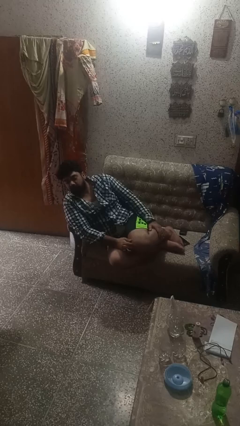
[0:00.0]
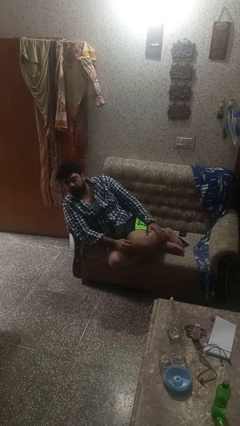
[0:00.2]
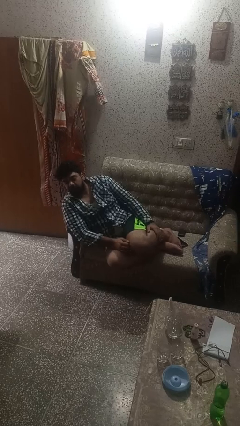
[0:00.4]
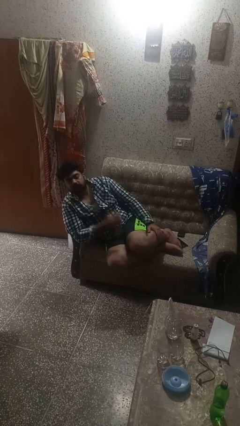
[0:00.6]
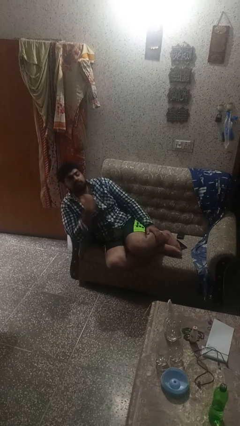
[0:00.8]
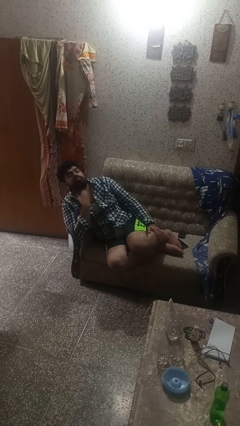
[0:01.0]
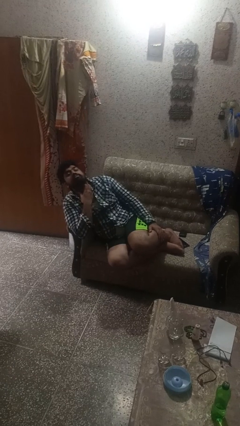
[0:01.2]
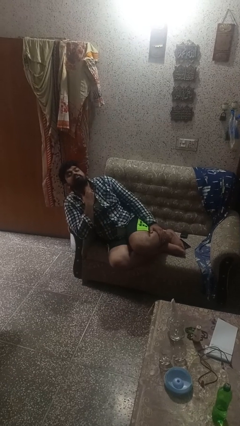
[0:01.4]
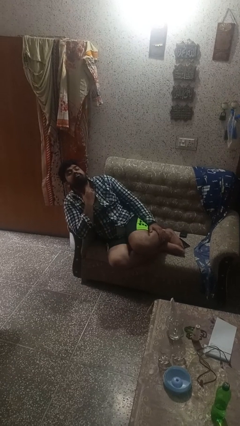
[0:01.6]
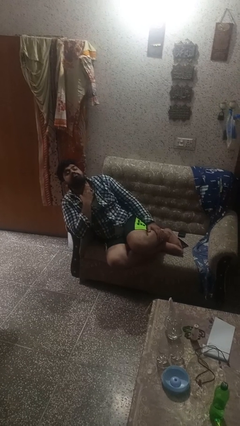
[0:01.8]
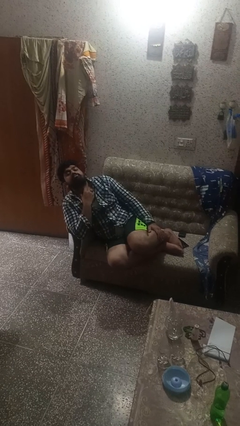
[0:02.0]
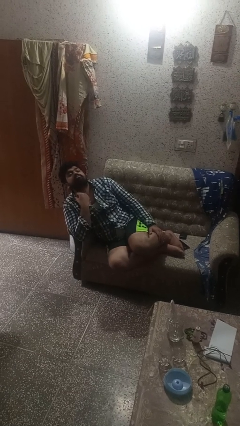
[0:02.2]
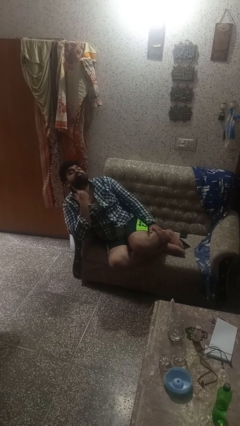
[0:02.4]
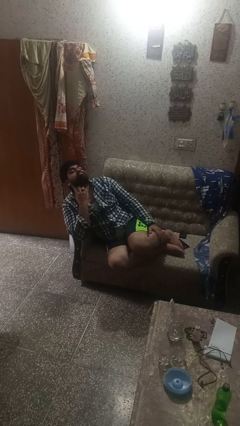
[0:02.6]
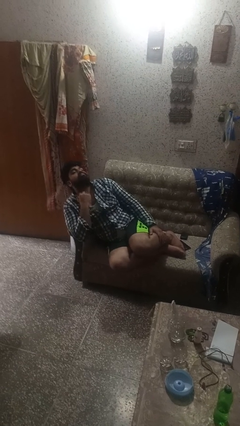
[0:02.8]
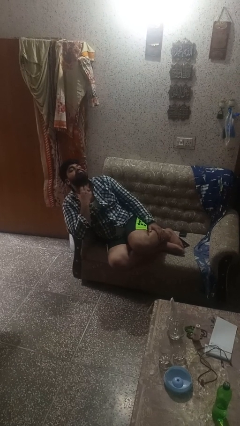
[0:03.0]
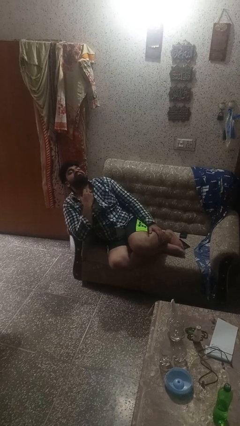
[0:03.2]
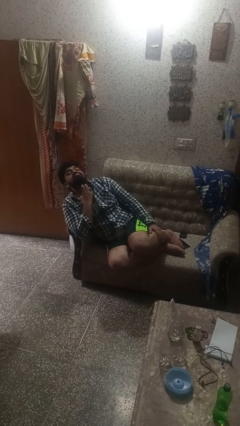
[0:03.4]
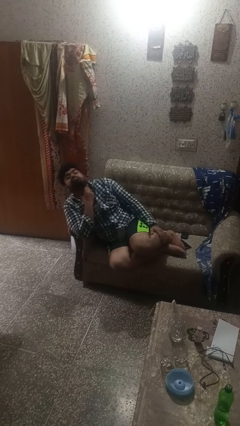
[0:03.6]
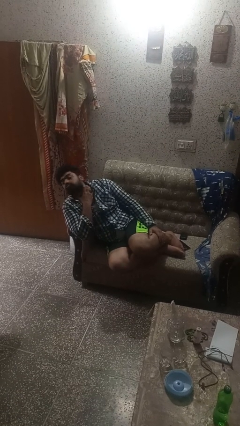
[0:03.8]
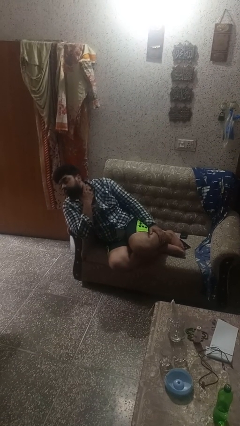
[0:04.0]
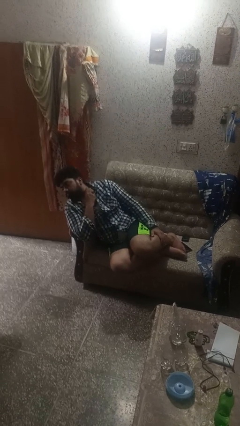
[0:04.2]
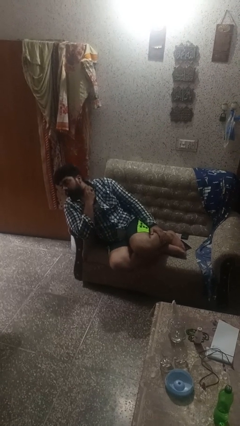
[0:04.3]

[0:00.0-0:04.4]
person rubs neck

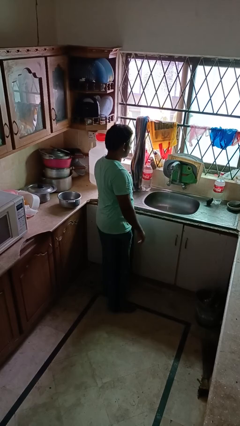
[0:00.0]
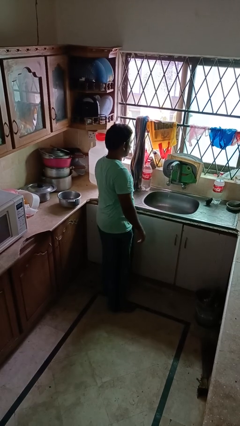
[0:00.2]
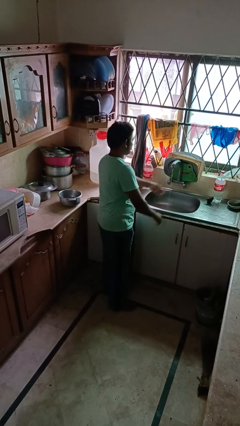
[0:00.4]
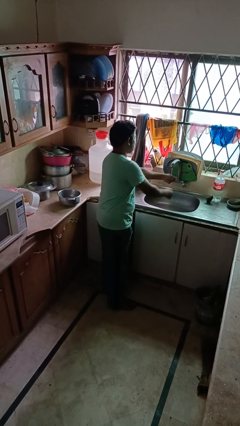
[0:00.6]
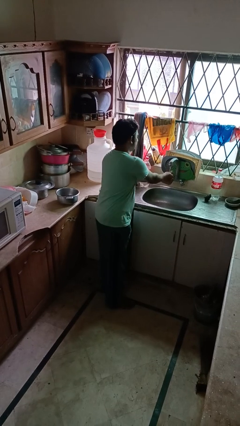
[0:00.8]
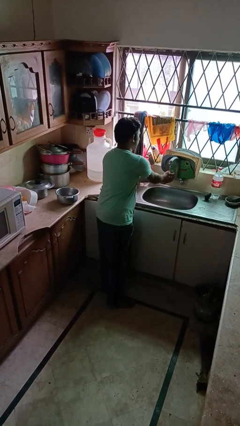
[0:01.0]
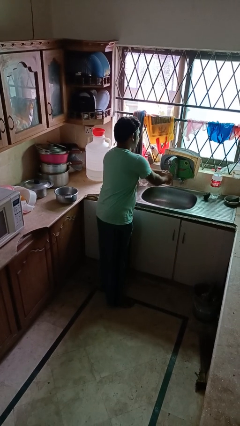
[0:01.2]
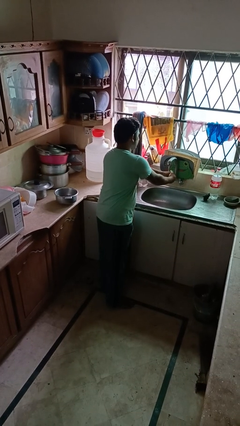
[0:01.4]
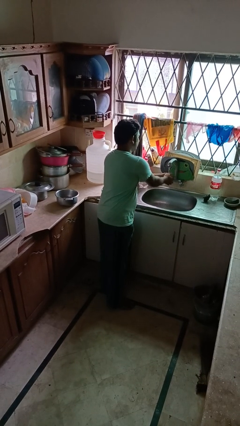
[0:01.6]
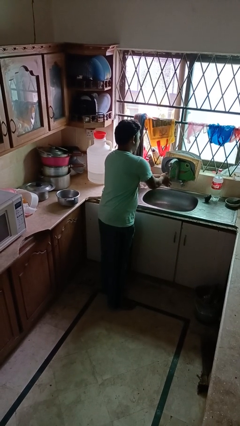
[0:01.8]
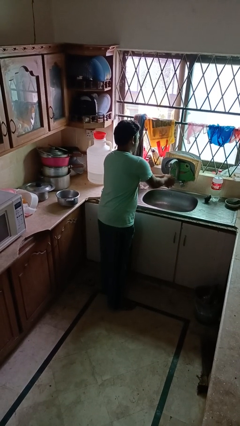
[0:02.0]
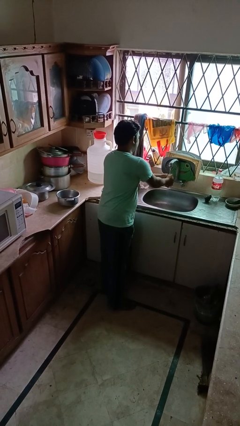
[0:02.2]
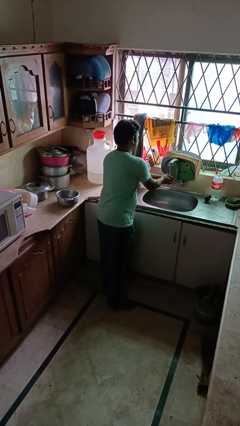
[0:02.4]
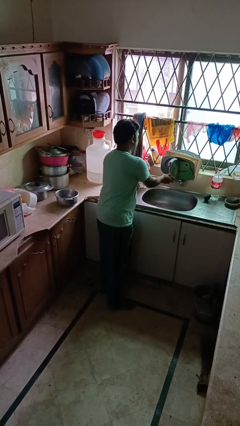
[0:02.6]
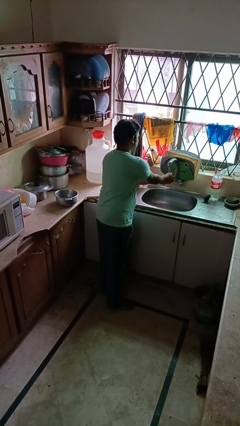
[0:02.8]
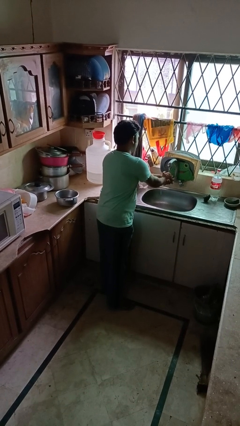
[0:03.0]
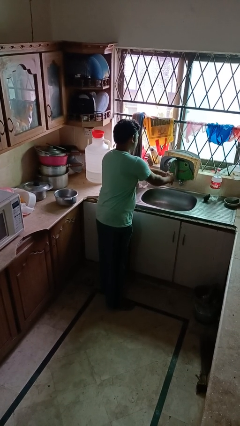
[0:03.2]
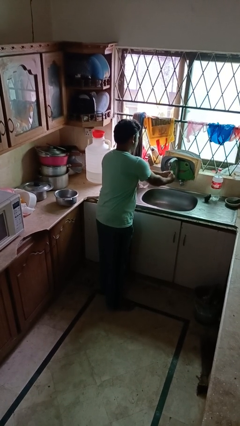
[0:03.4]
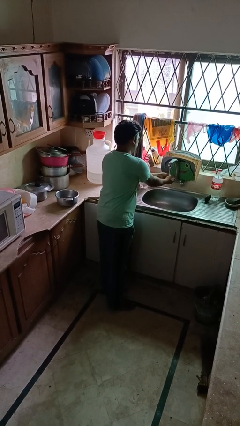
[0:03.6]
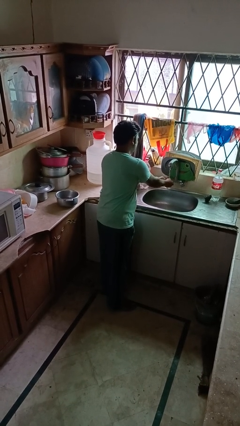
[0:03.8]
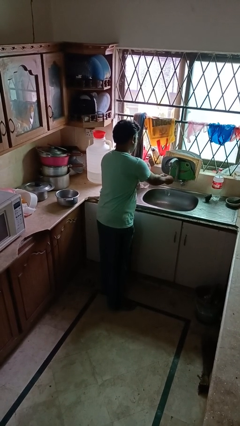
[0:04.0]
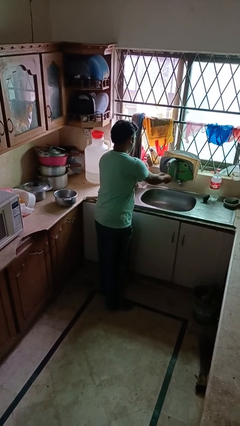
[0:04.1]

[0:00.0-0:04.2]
person washes hands

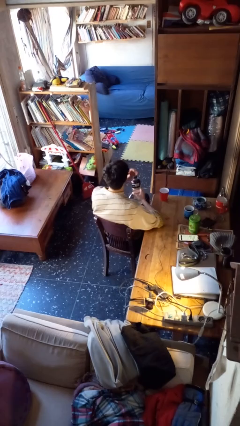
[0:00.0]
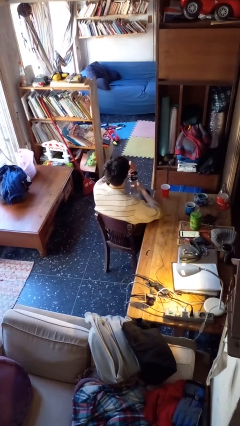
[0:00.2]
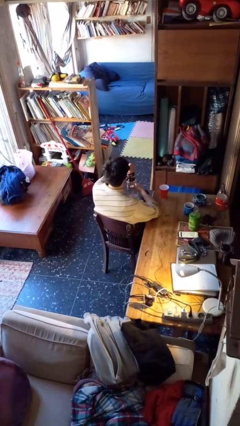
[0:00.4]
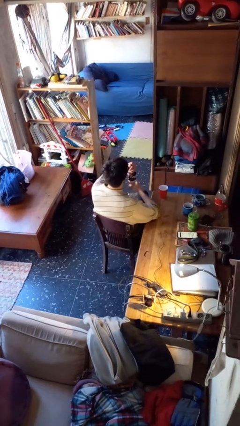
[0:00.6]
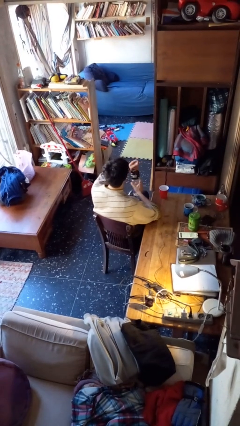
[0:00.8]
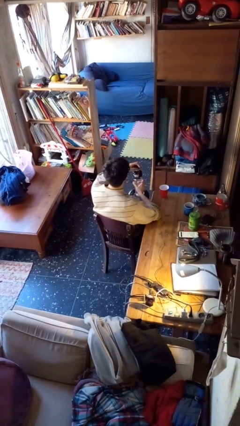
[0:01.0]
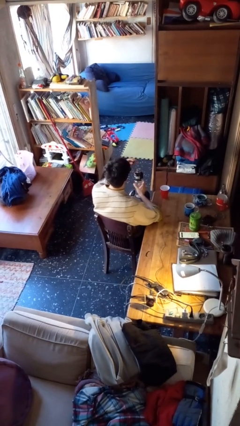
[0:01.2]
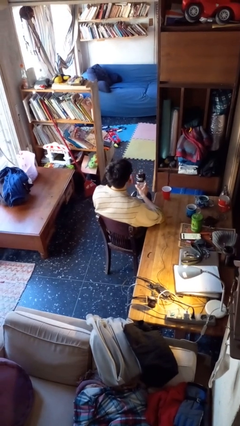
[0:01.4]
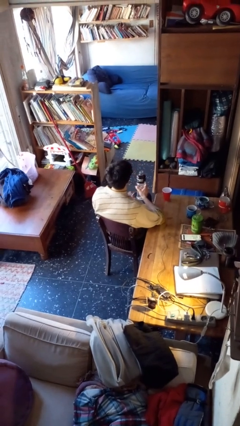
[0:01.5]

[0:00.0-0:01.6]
person unscrews lid from bottle

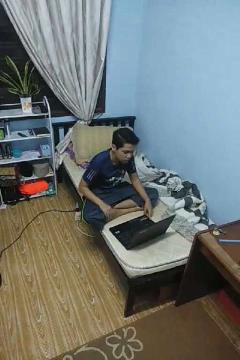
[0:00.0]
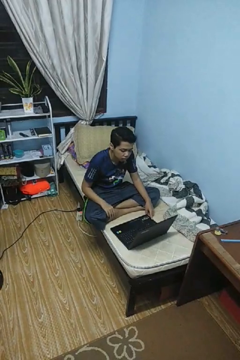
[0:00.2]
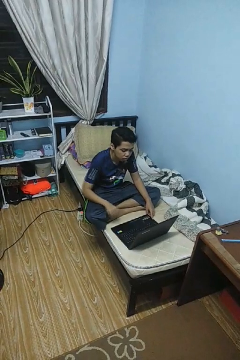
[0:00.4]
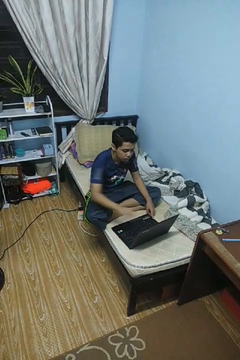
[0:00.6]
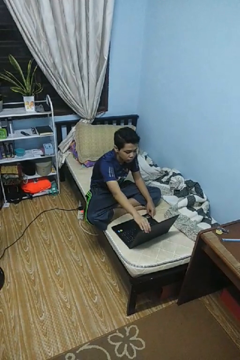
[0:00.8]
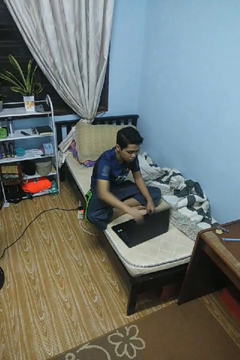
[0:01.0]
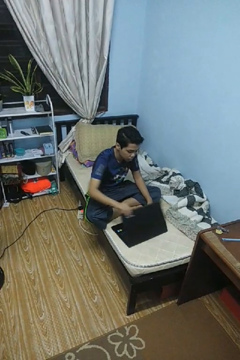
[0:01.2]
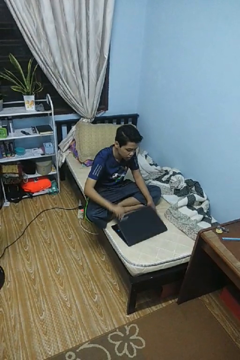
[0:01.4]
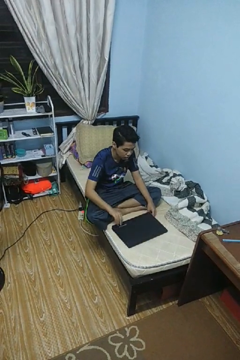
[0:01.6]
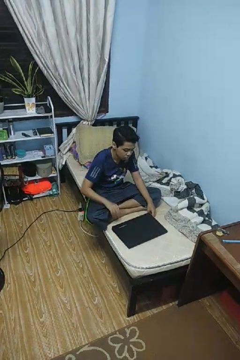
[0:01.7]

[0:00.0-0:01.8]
person closes laptop

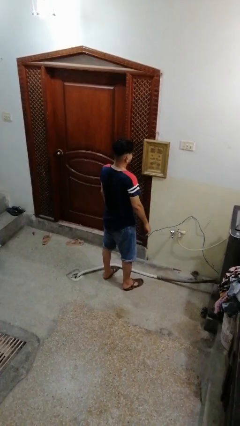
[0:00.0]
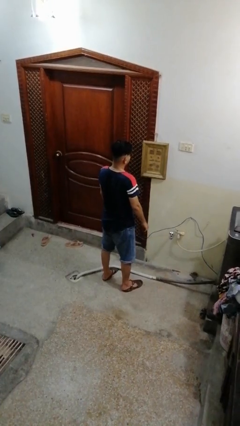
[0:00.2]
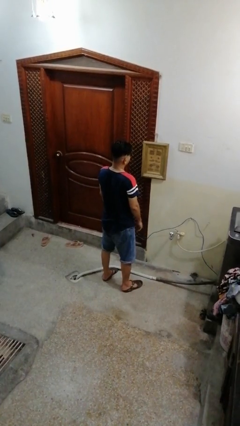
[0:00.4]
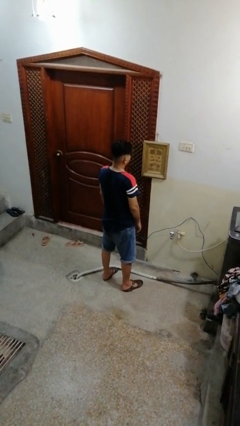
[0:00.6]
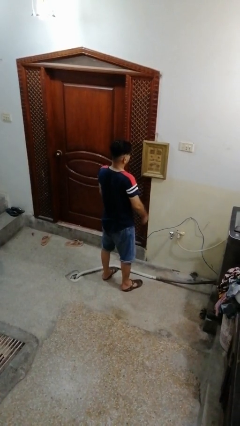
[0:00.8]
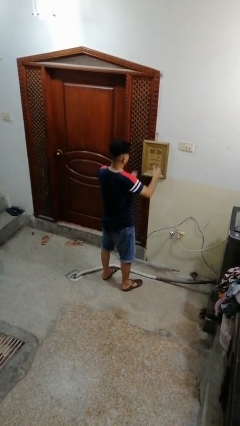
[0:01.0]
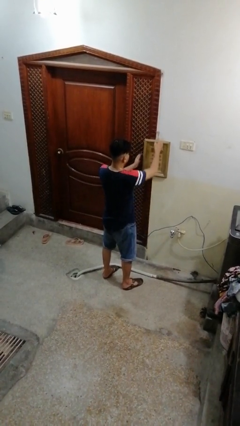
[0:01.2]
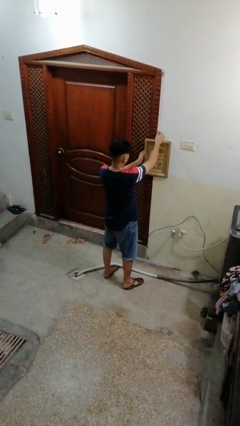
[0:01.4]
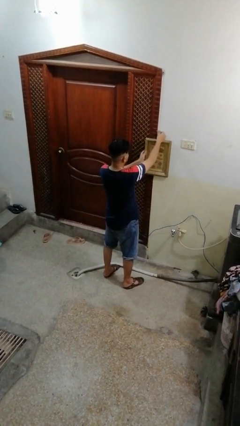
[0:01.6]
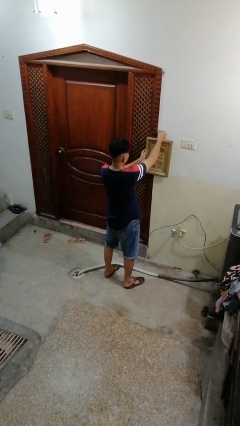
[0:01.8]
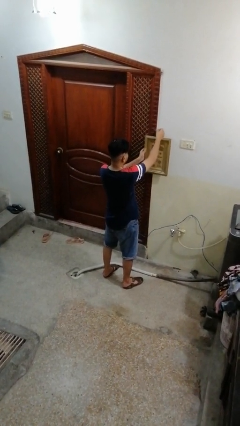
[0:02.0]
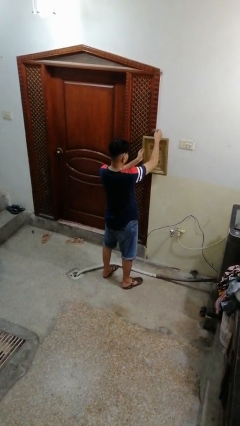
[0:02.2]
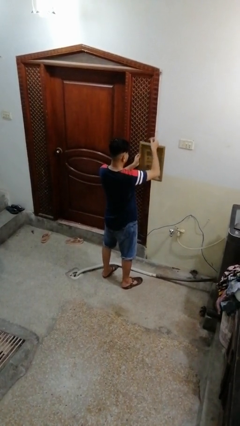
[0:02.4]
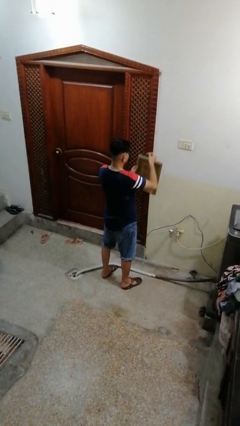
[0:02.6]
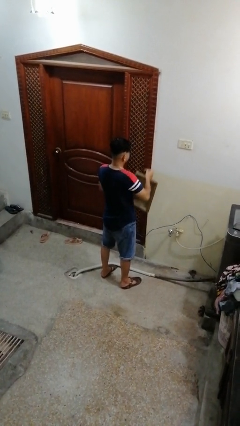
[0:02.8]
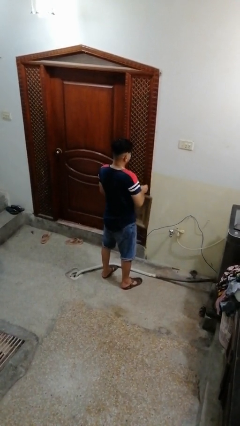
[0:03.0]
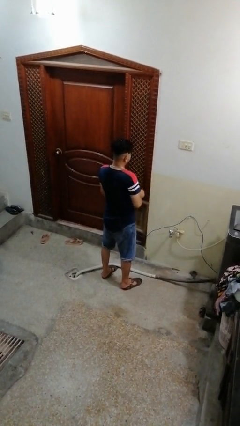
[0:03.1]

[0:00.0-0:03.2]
person takes down picture frame

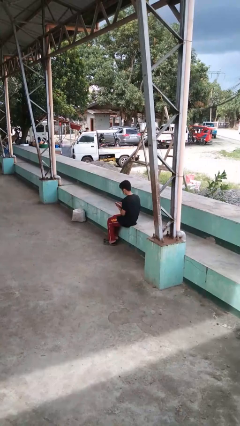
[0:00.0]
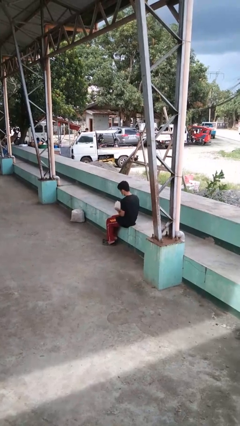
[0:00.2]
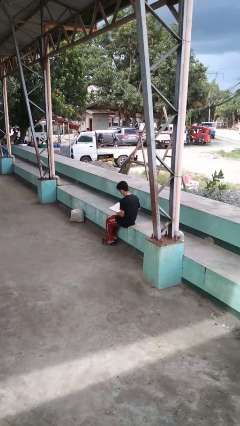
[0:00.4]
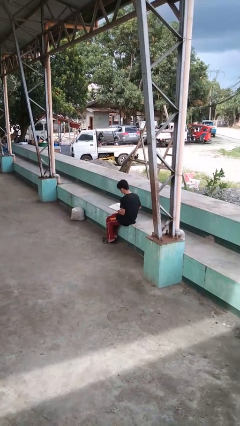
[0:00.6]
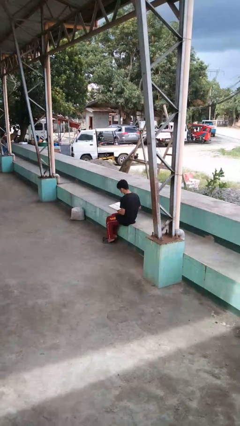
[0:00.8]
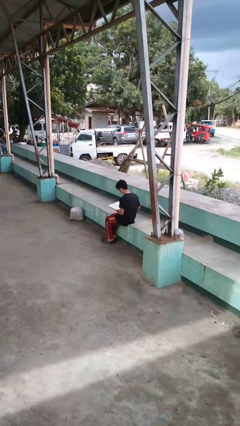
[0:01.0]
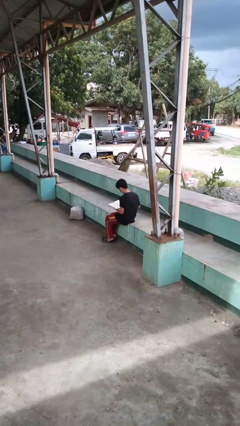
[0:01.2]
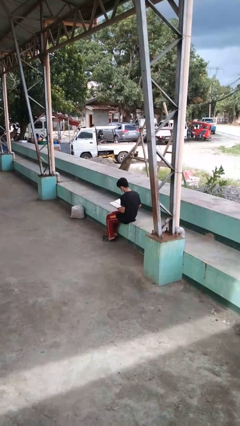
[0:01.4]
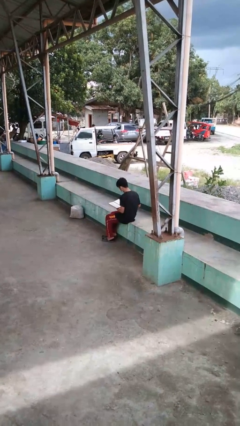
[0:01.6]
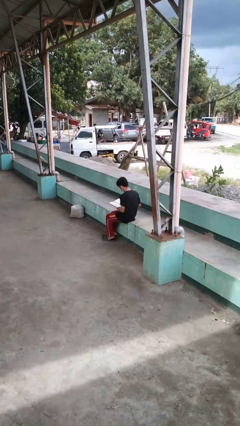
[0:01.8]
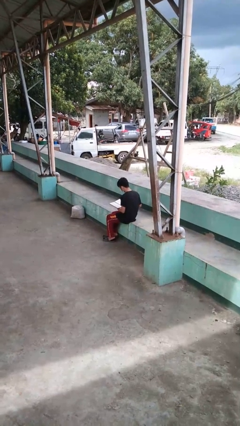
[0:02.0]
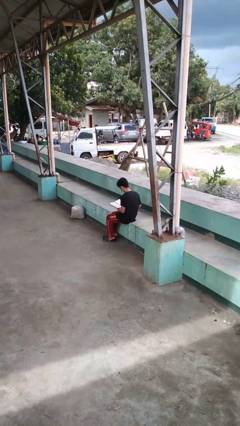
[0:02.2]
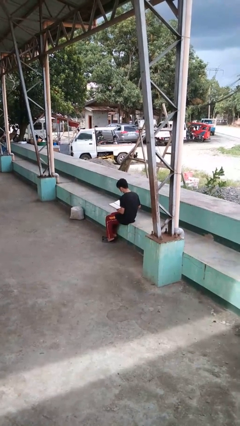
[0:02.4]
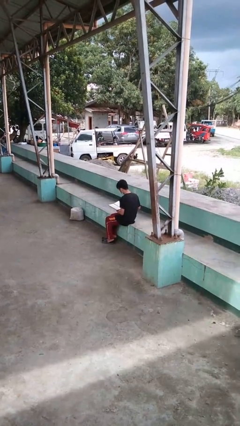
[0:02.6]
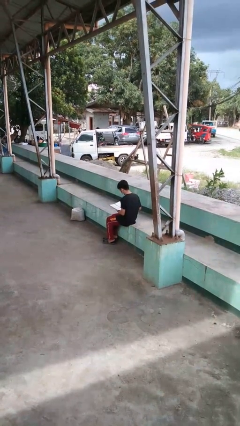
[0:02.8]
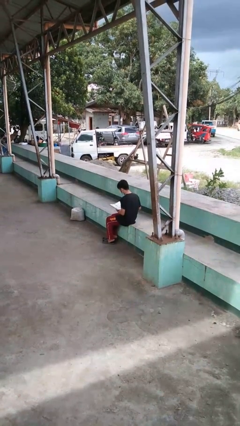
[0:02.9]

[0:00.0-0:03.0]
person reads book
